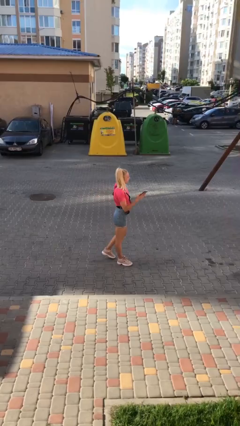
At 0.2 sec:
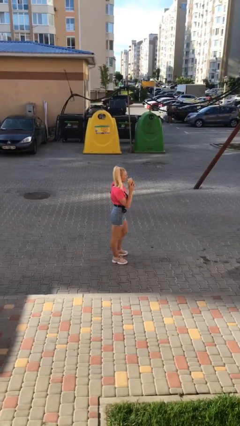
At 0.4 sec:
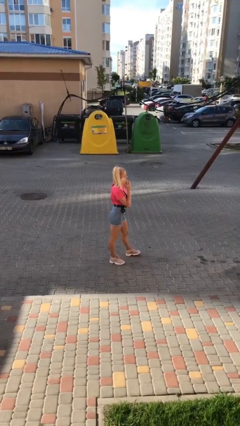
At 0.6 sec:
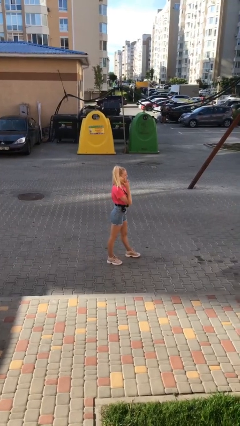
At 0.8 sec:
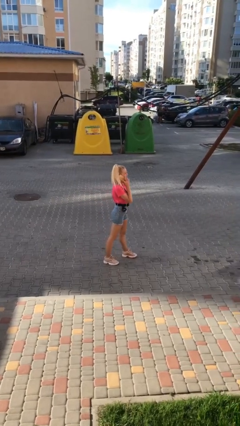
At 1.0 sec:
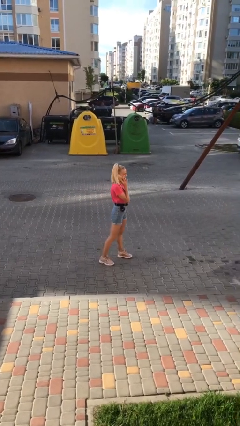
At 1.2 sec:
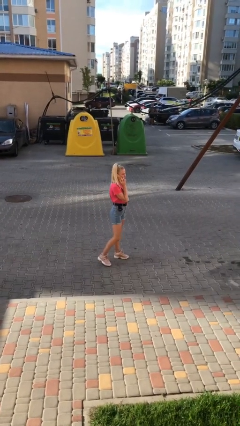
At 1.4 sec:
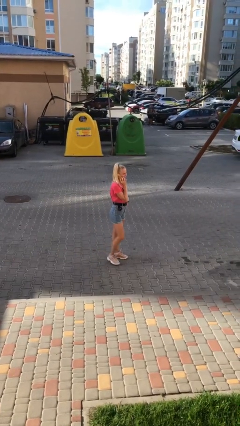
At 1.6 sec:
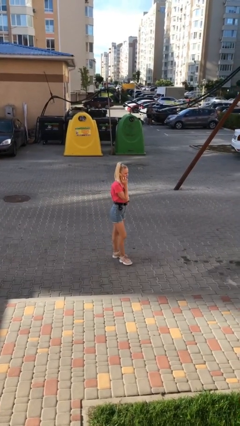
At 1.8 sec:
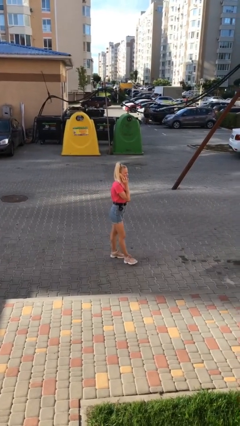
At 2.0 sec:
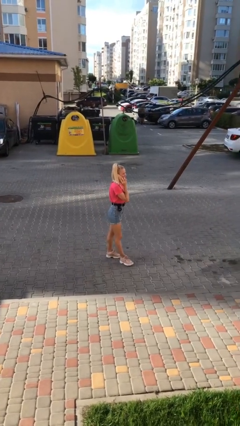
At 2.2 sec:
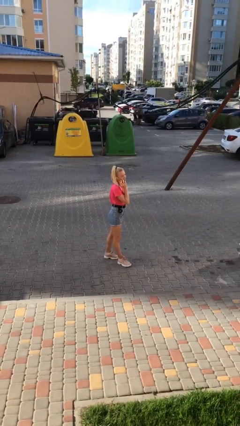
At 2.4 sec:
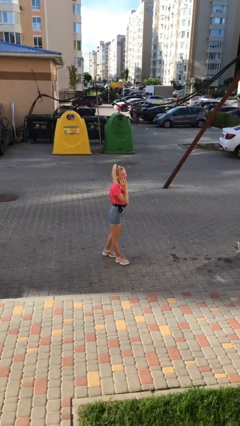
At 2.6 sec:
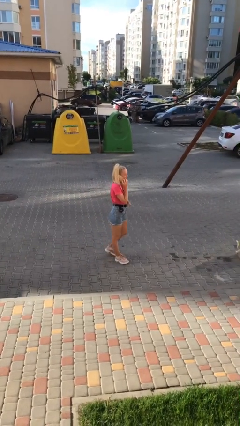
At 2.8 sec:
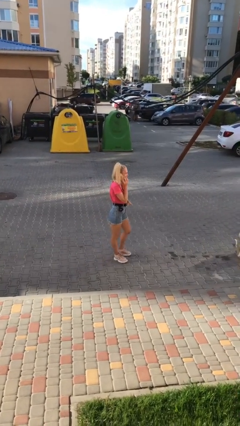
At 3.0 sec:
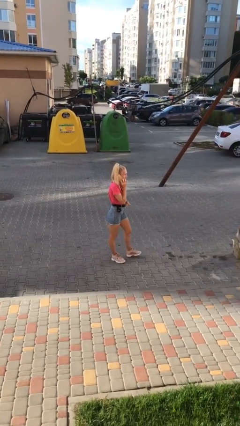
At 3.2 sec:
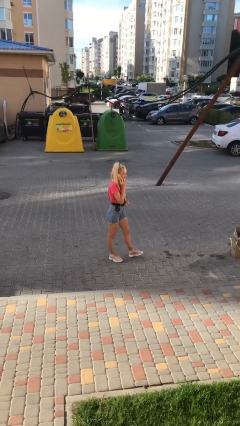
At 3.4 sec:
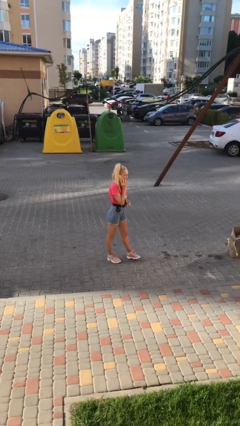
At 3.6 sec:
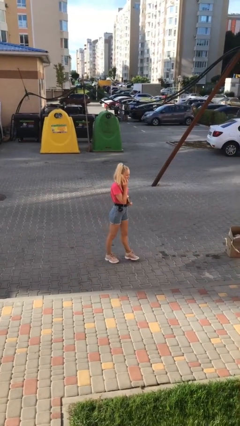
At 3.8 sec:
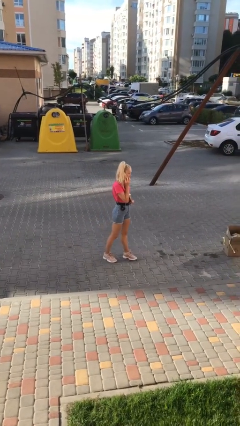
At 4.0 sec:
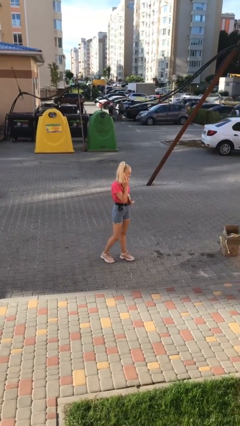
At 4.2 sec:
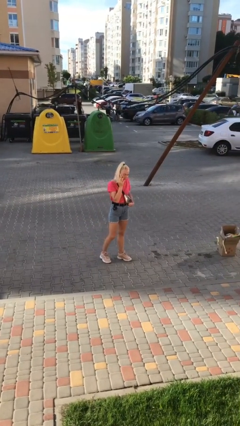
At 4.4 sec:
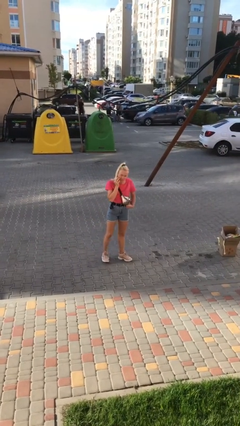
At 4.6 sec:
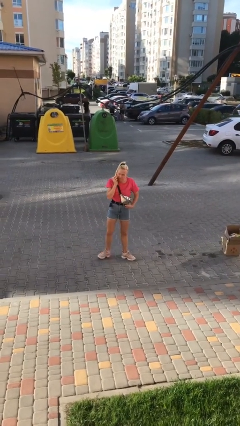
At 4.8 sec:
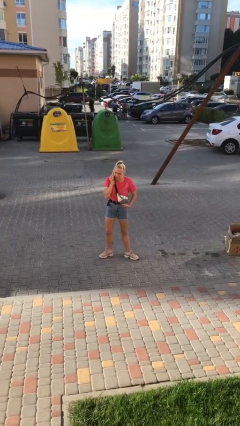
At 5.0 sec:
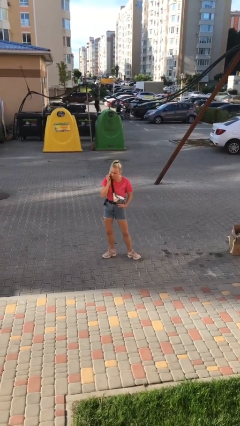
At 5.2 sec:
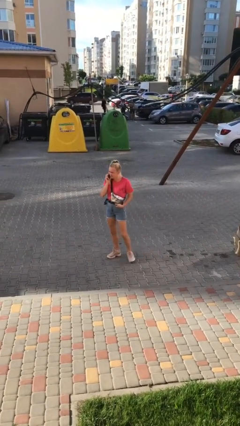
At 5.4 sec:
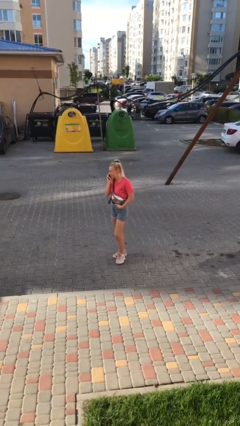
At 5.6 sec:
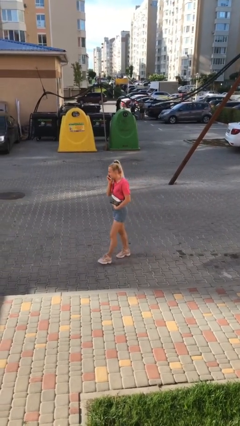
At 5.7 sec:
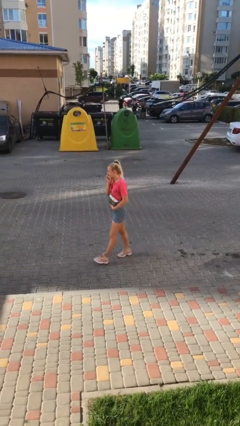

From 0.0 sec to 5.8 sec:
person talks on phone

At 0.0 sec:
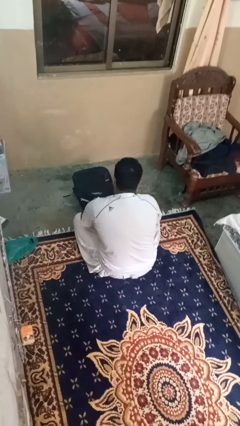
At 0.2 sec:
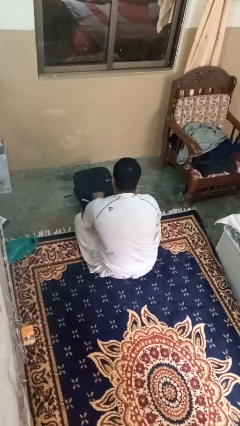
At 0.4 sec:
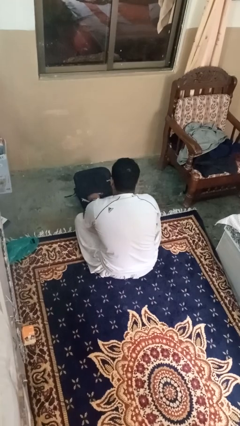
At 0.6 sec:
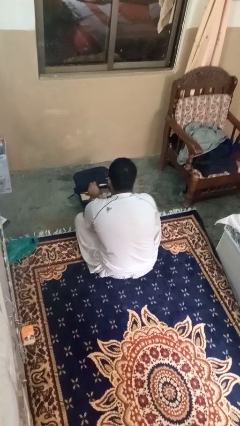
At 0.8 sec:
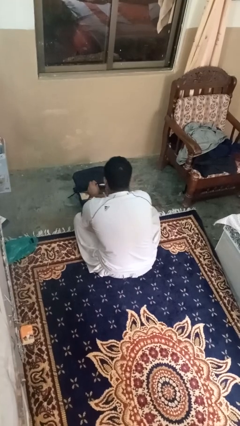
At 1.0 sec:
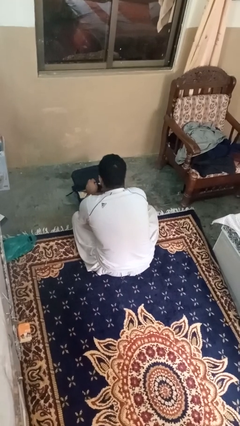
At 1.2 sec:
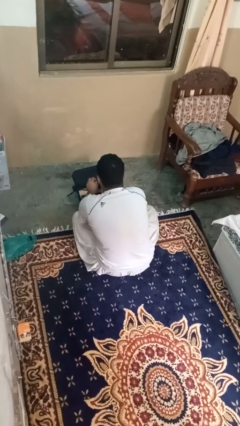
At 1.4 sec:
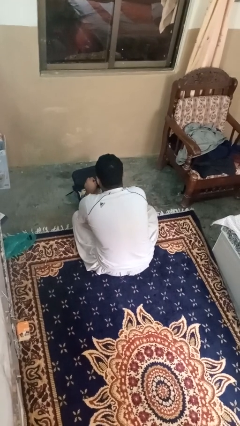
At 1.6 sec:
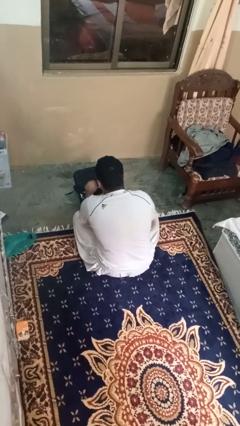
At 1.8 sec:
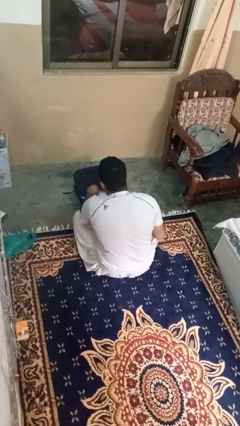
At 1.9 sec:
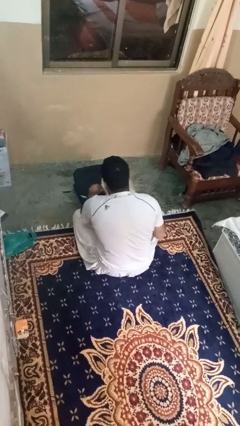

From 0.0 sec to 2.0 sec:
person takes object from bag

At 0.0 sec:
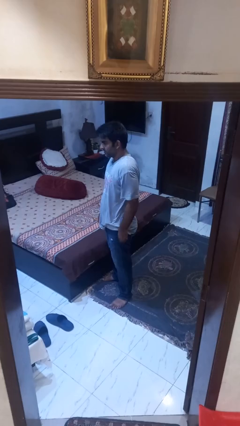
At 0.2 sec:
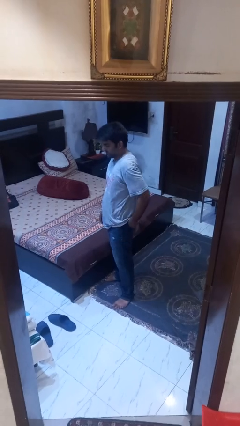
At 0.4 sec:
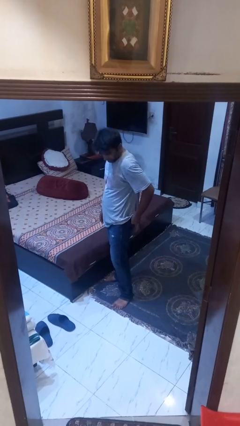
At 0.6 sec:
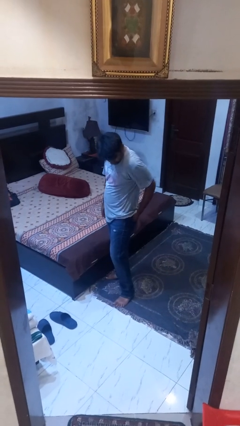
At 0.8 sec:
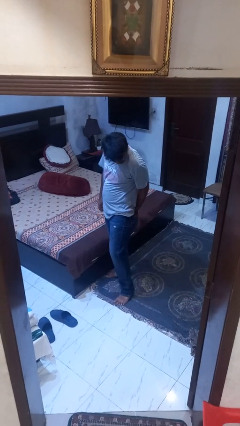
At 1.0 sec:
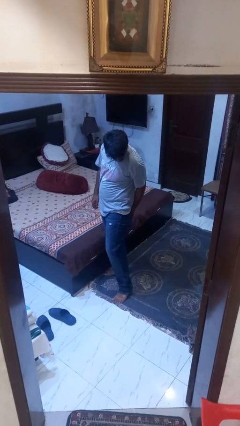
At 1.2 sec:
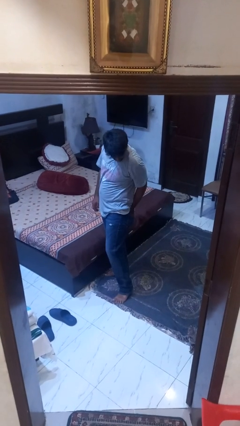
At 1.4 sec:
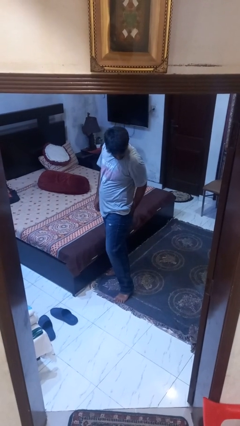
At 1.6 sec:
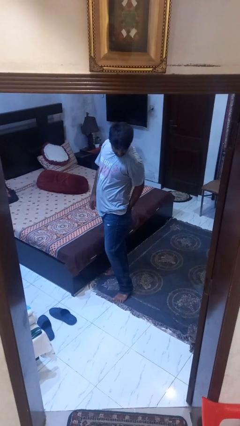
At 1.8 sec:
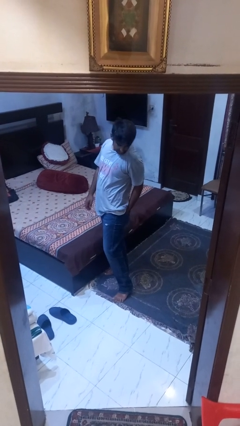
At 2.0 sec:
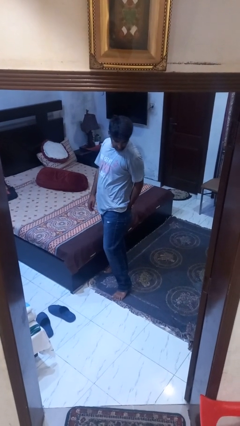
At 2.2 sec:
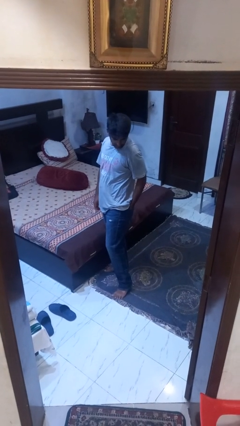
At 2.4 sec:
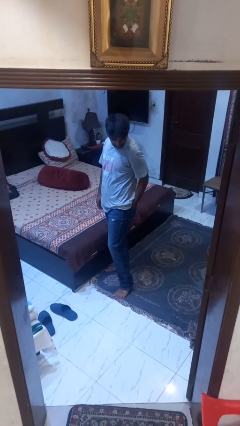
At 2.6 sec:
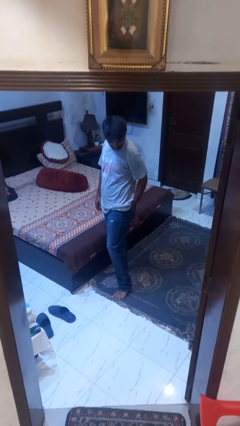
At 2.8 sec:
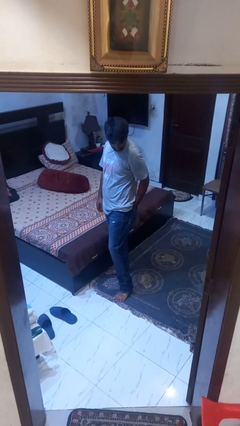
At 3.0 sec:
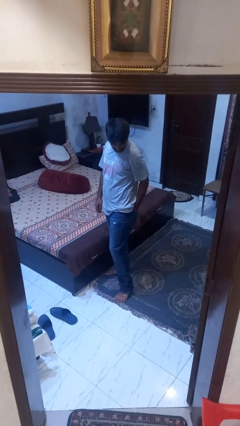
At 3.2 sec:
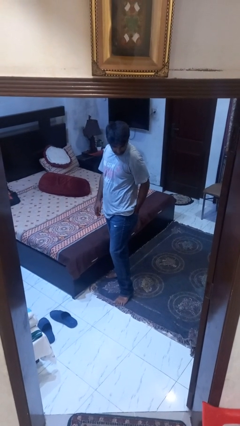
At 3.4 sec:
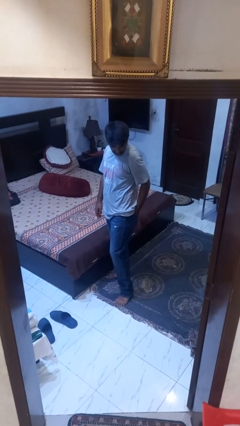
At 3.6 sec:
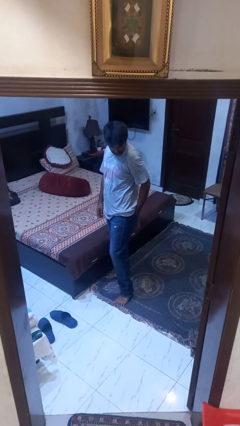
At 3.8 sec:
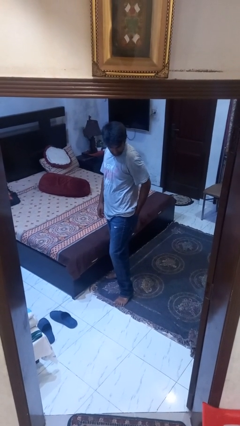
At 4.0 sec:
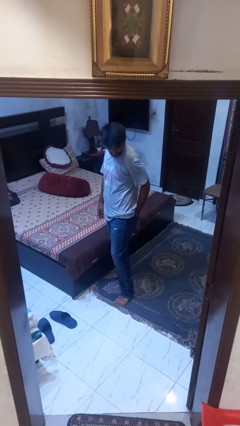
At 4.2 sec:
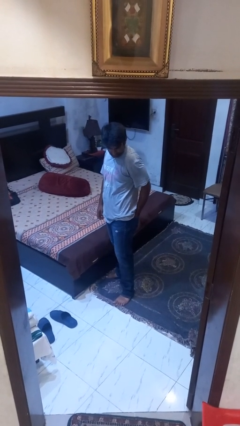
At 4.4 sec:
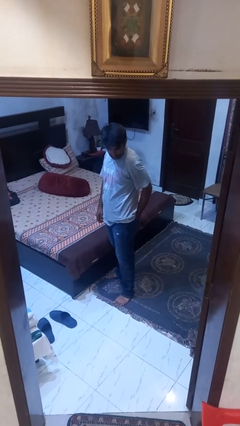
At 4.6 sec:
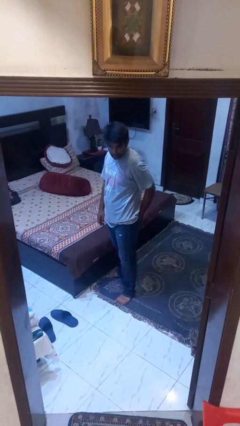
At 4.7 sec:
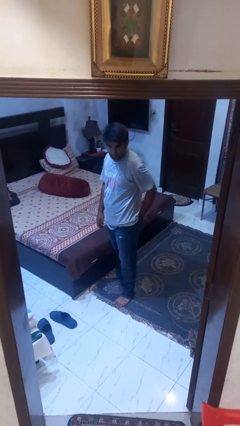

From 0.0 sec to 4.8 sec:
person puts hands in back pockets

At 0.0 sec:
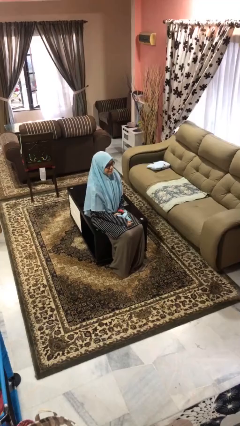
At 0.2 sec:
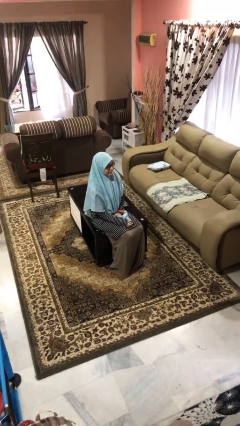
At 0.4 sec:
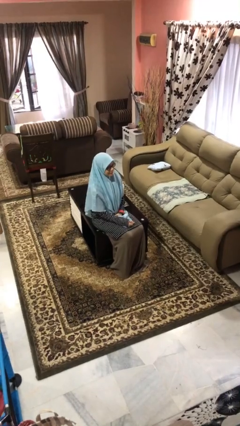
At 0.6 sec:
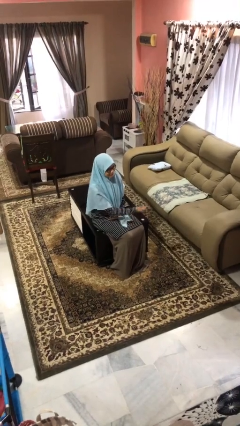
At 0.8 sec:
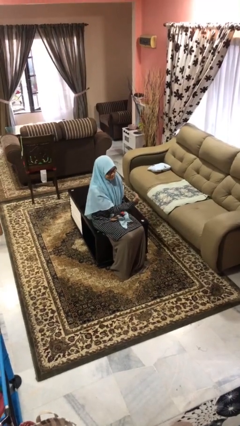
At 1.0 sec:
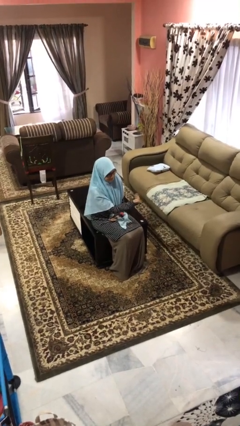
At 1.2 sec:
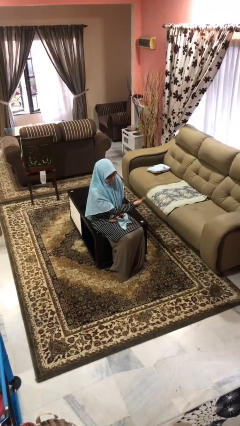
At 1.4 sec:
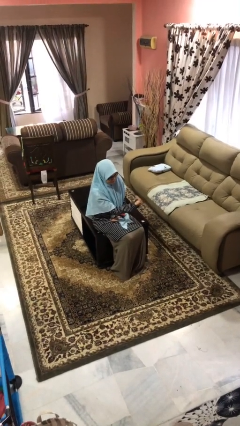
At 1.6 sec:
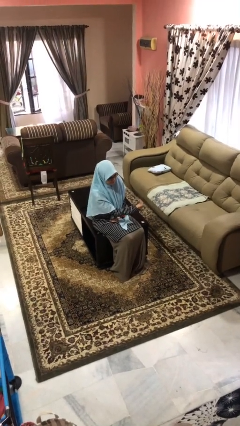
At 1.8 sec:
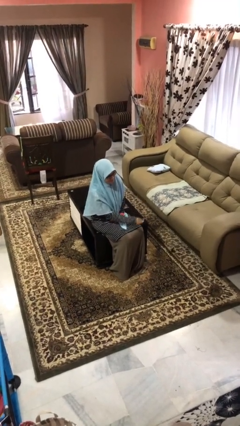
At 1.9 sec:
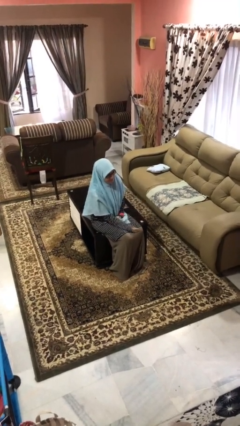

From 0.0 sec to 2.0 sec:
person gestures come here

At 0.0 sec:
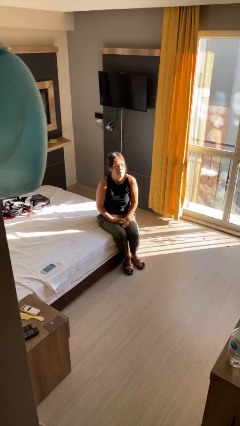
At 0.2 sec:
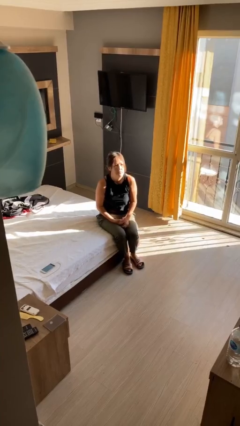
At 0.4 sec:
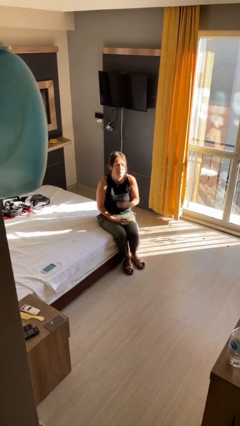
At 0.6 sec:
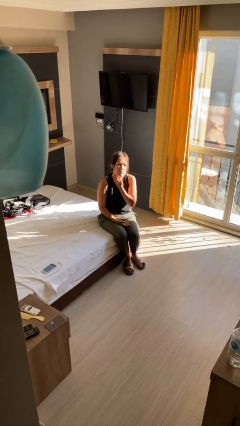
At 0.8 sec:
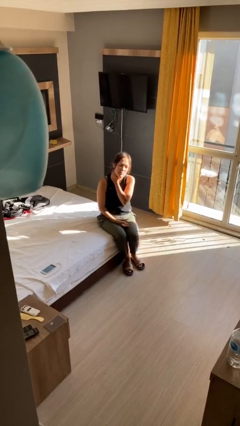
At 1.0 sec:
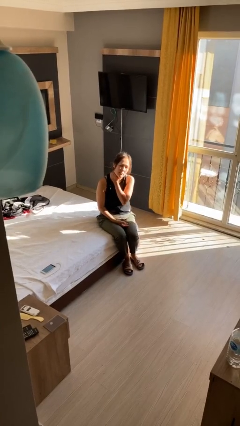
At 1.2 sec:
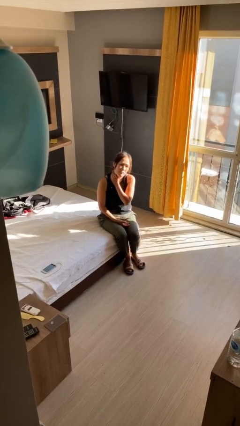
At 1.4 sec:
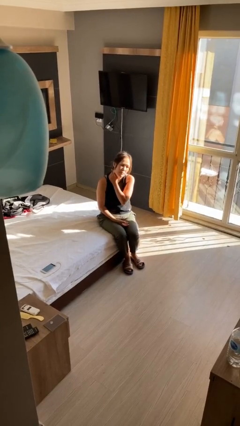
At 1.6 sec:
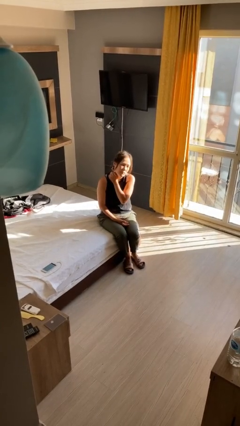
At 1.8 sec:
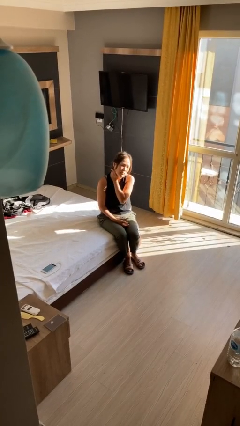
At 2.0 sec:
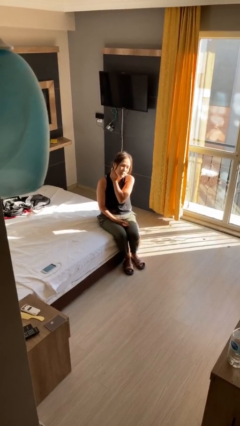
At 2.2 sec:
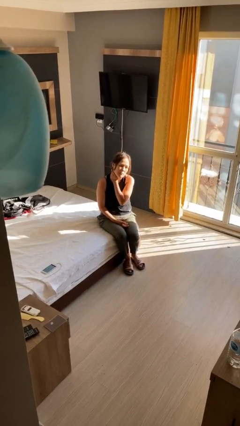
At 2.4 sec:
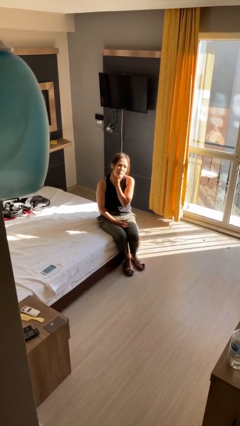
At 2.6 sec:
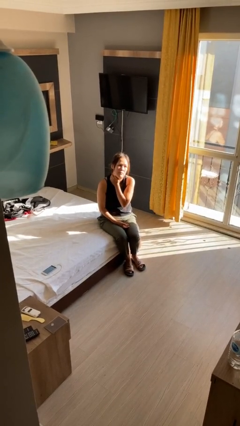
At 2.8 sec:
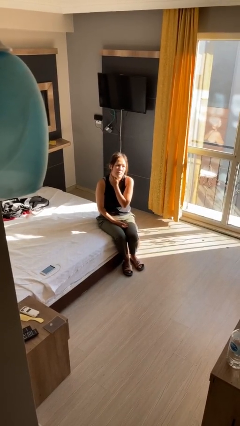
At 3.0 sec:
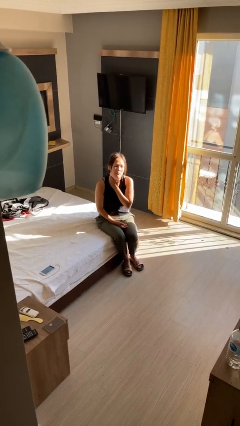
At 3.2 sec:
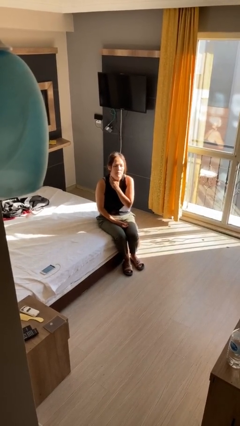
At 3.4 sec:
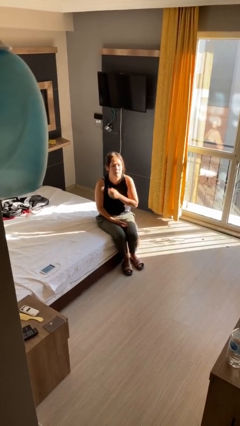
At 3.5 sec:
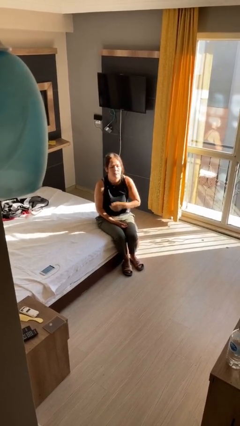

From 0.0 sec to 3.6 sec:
person rubs neck
